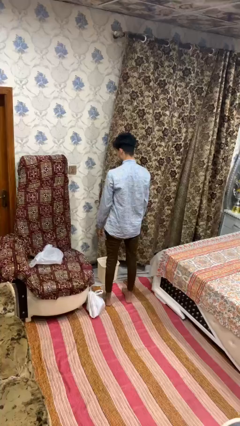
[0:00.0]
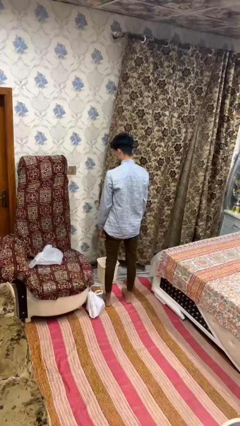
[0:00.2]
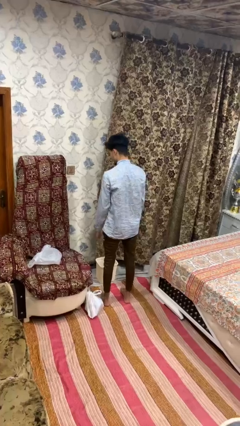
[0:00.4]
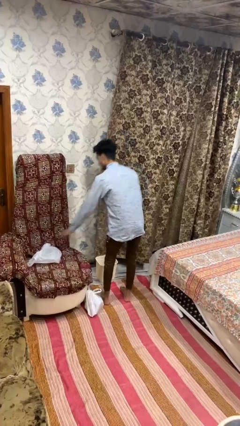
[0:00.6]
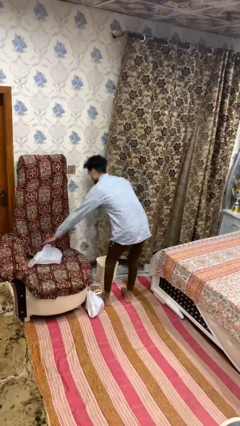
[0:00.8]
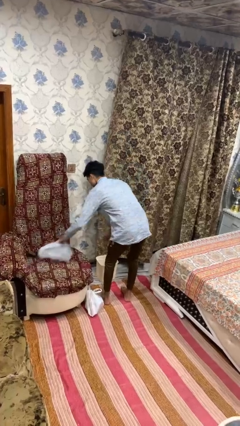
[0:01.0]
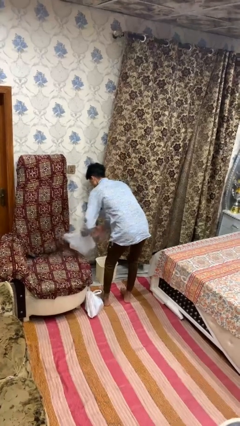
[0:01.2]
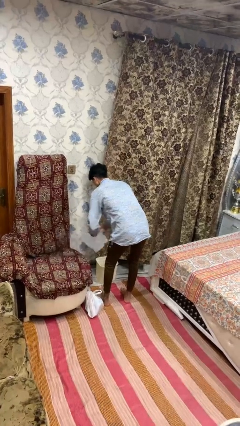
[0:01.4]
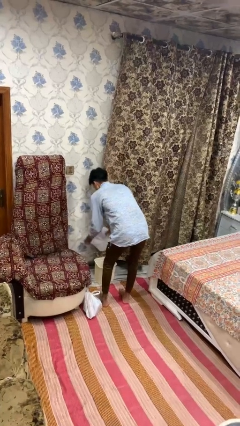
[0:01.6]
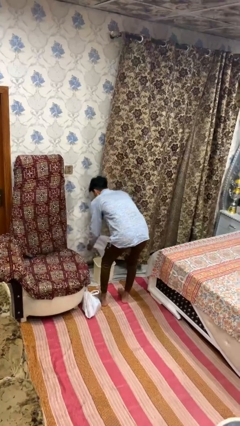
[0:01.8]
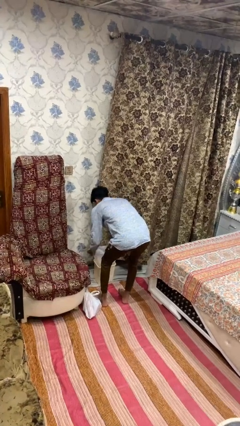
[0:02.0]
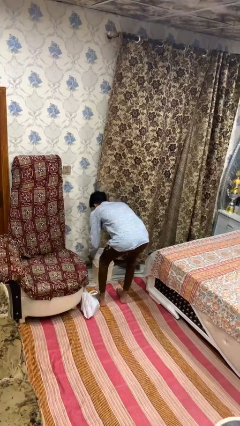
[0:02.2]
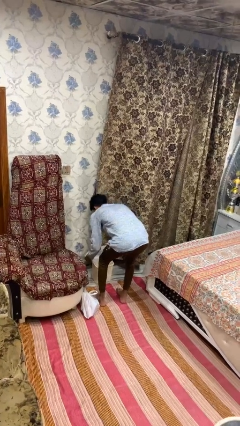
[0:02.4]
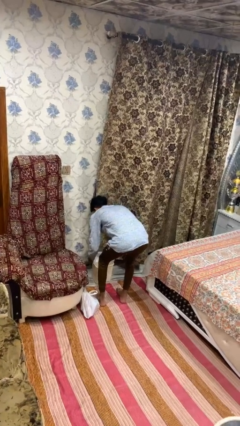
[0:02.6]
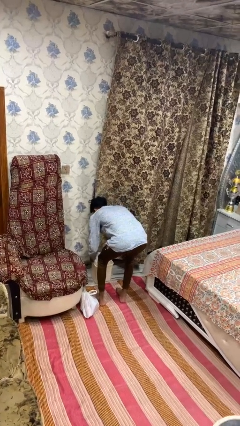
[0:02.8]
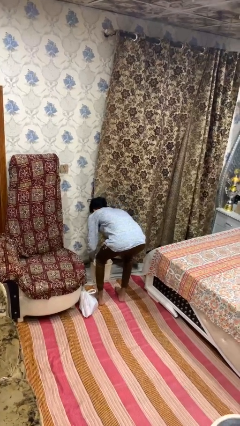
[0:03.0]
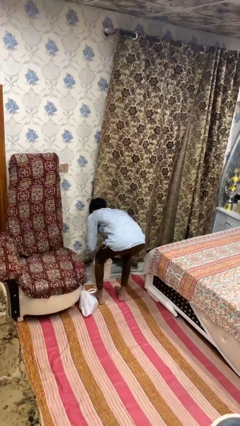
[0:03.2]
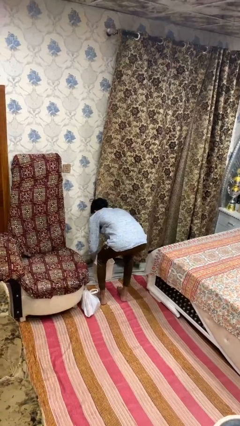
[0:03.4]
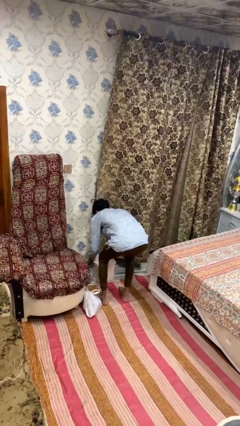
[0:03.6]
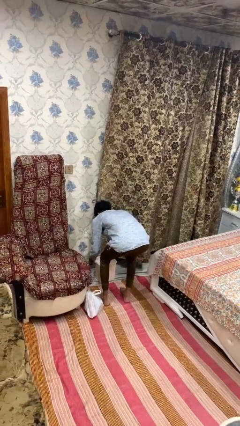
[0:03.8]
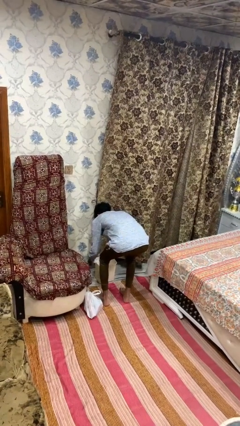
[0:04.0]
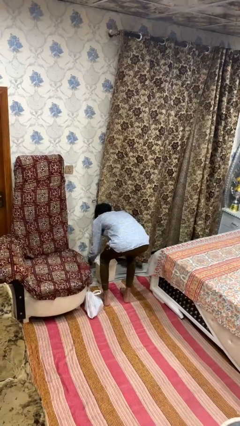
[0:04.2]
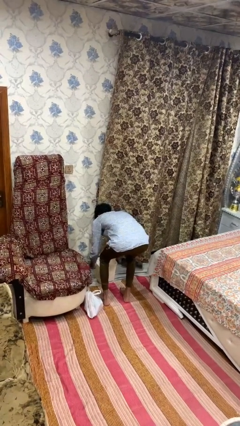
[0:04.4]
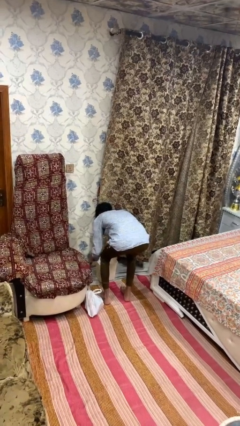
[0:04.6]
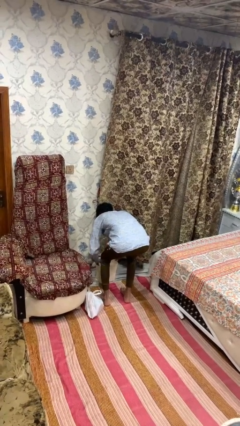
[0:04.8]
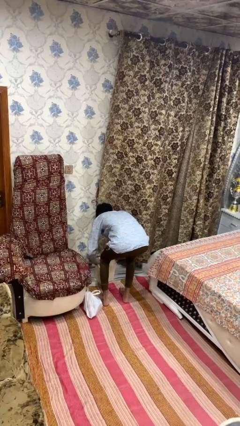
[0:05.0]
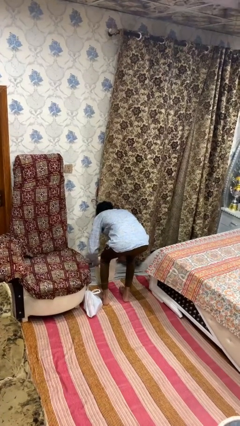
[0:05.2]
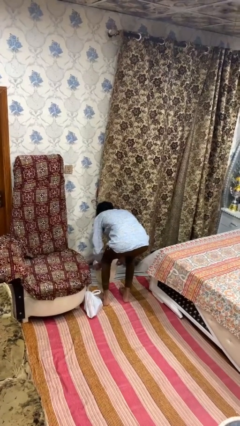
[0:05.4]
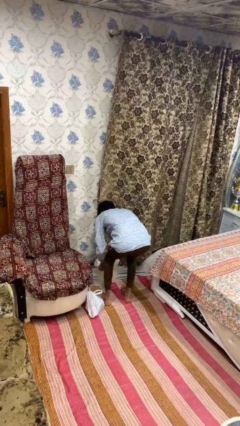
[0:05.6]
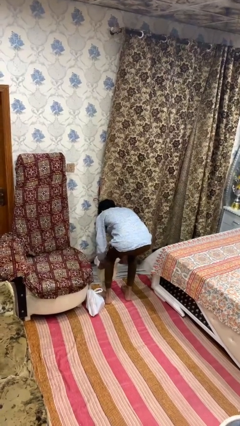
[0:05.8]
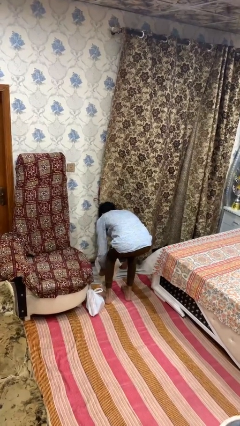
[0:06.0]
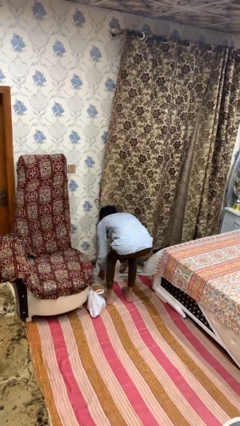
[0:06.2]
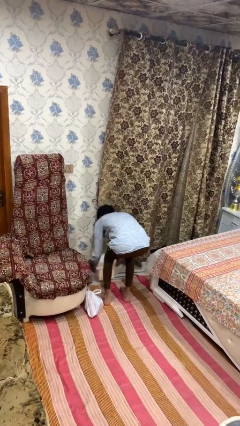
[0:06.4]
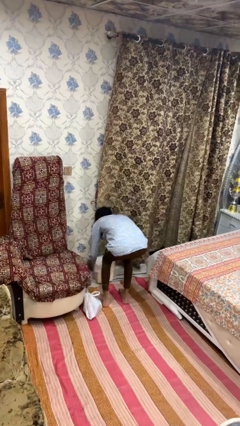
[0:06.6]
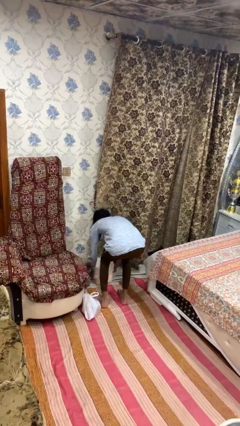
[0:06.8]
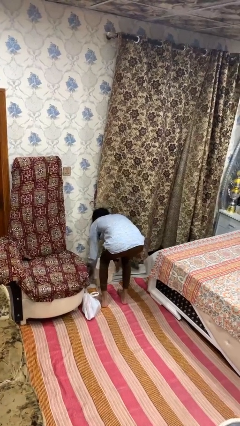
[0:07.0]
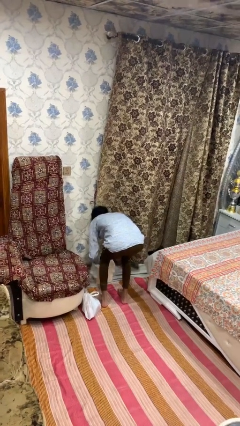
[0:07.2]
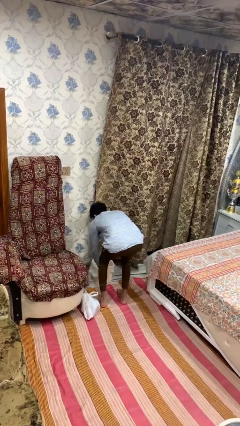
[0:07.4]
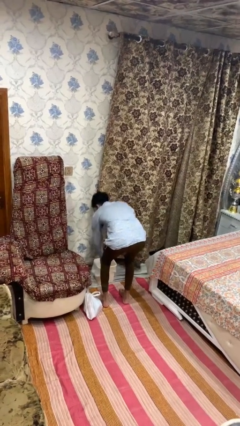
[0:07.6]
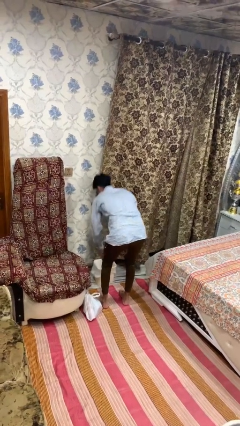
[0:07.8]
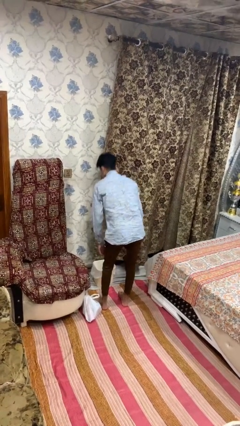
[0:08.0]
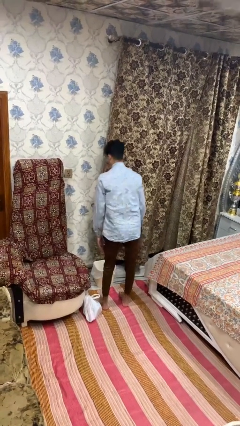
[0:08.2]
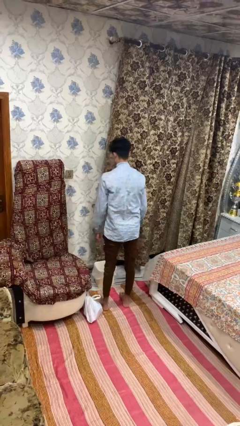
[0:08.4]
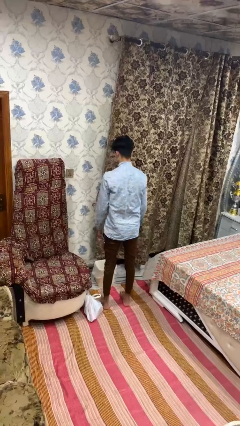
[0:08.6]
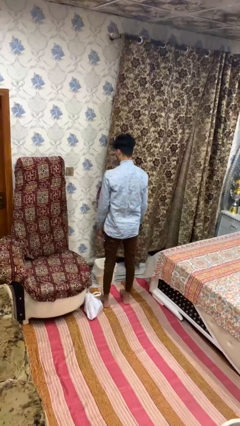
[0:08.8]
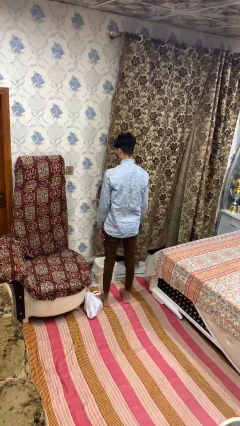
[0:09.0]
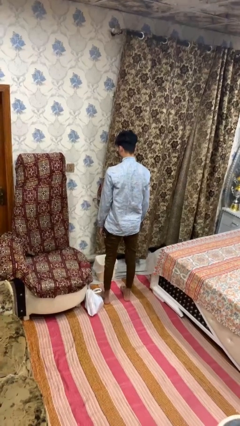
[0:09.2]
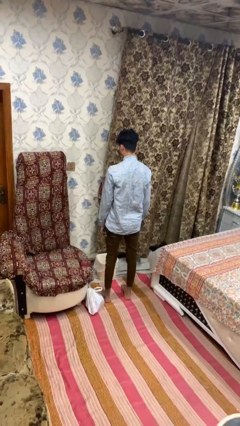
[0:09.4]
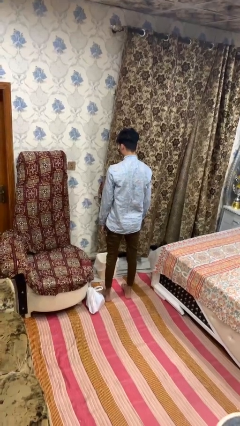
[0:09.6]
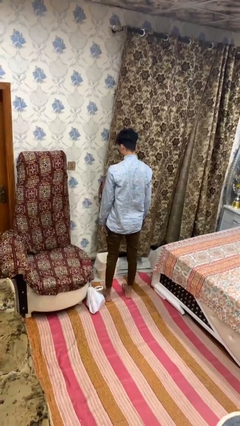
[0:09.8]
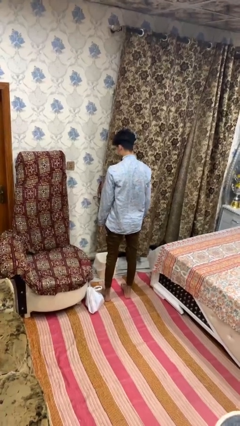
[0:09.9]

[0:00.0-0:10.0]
person inserts trashbag into trashcan

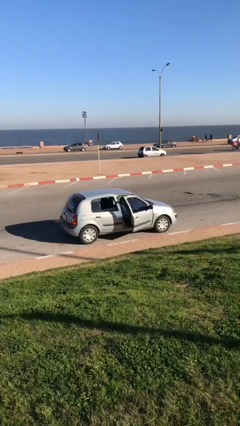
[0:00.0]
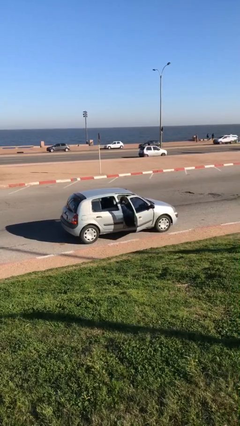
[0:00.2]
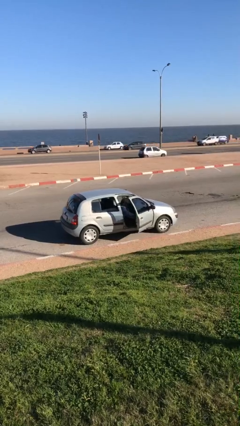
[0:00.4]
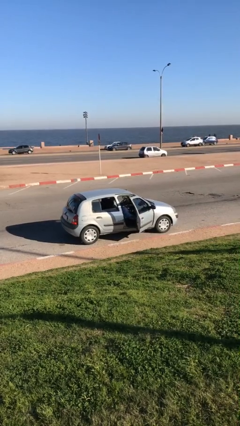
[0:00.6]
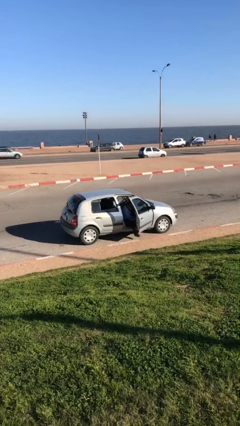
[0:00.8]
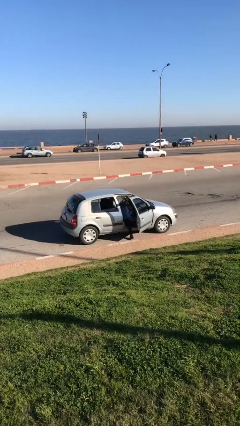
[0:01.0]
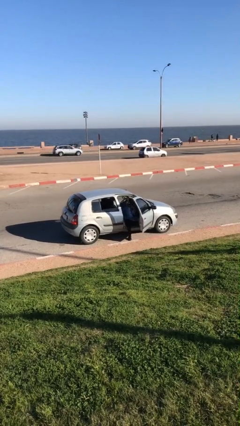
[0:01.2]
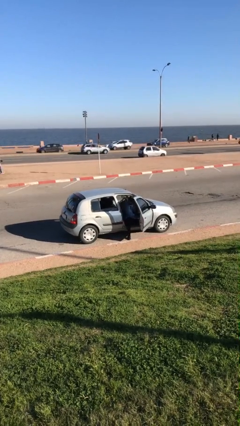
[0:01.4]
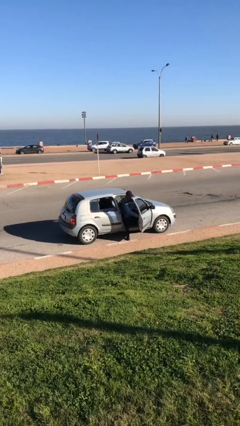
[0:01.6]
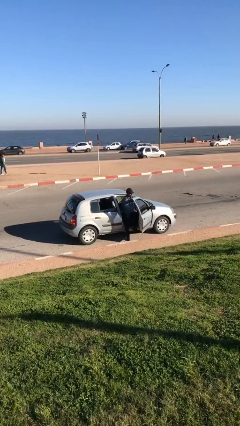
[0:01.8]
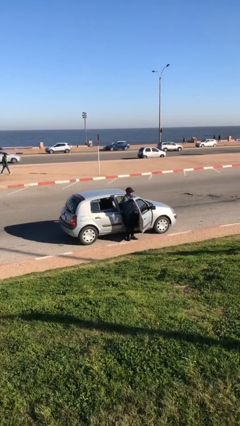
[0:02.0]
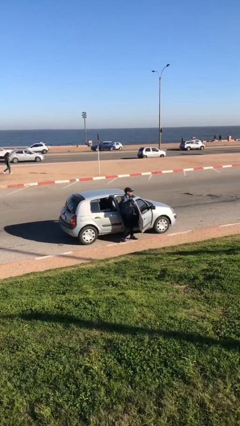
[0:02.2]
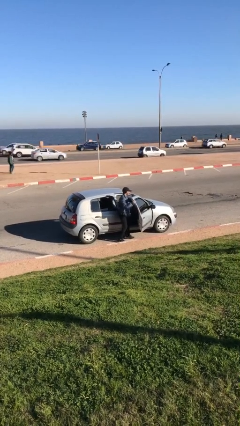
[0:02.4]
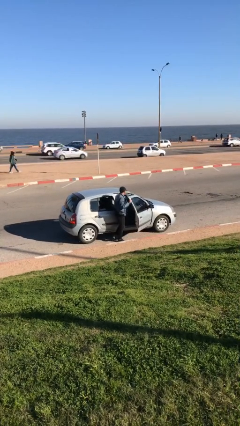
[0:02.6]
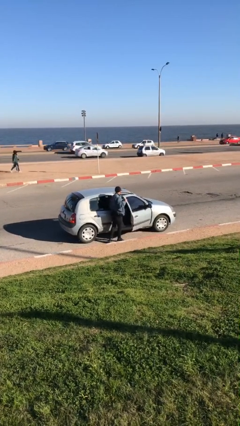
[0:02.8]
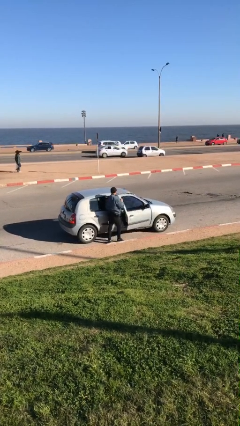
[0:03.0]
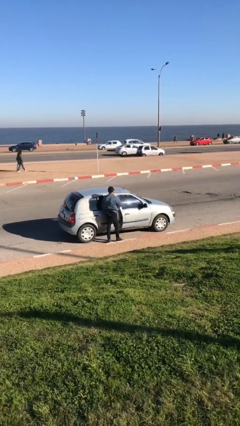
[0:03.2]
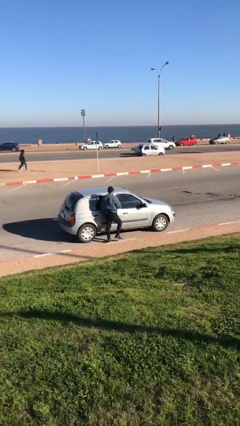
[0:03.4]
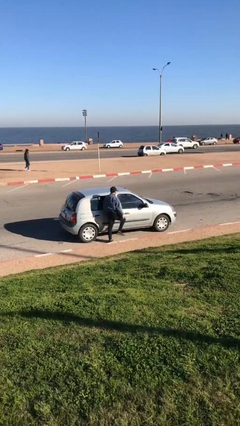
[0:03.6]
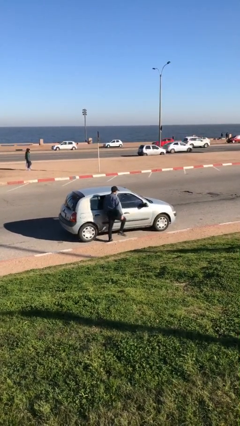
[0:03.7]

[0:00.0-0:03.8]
car drops off person

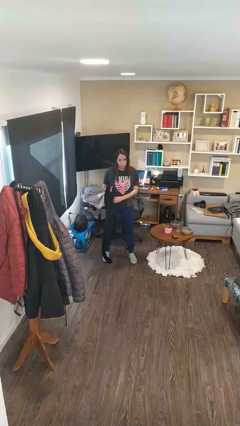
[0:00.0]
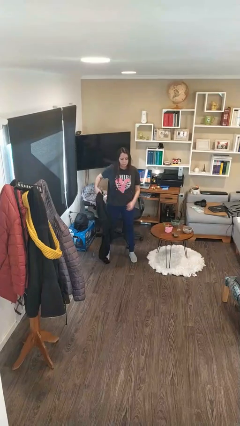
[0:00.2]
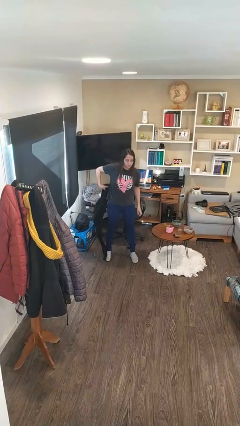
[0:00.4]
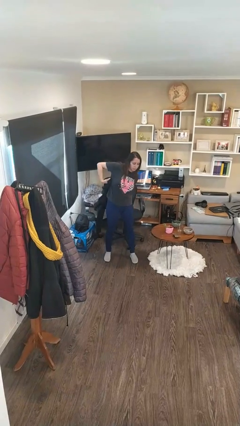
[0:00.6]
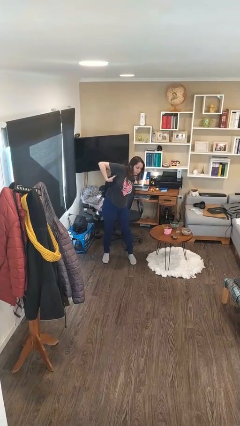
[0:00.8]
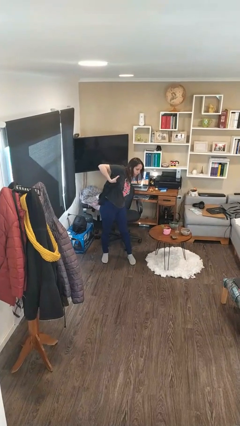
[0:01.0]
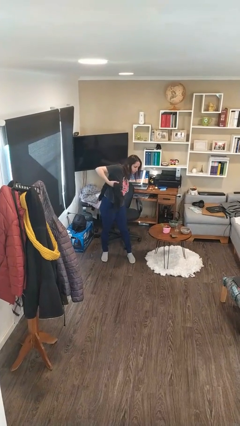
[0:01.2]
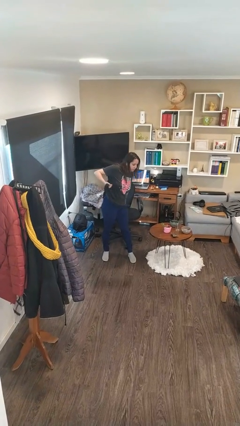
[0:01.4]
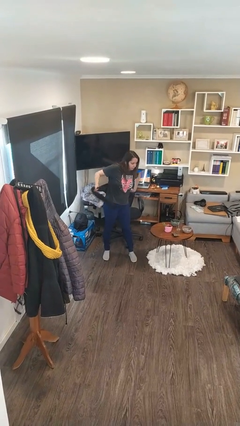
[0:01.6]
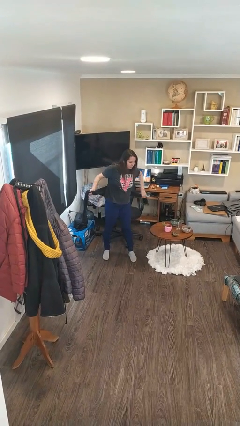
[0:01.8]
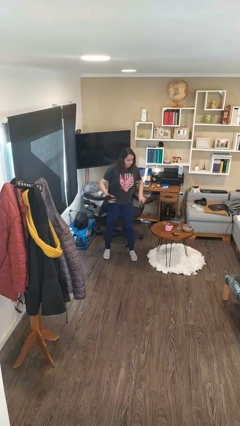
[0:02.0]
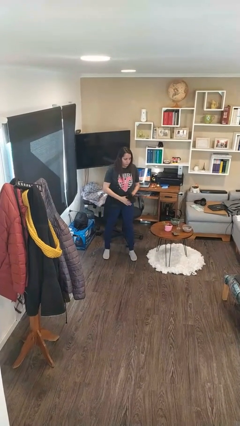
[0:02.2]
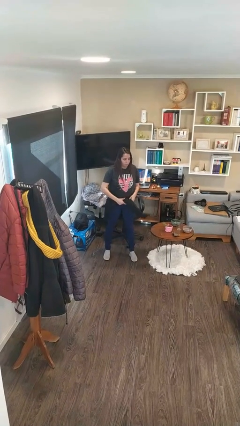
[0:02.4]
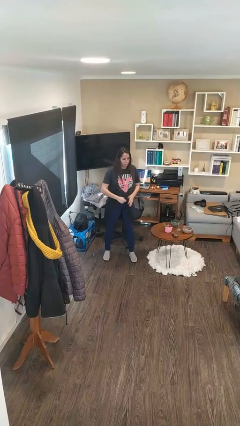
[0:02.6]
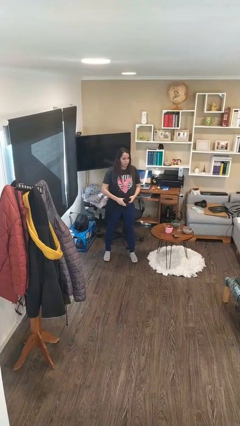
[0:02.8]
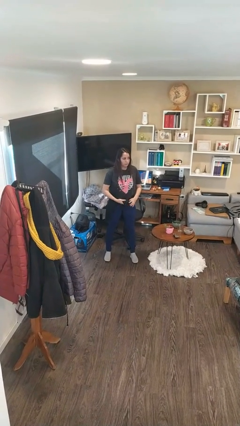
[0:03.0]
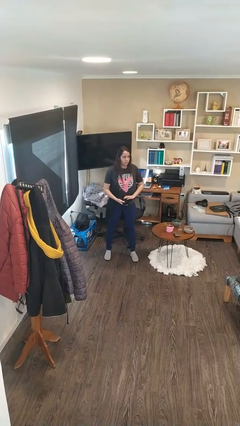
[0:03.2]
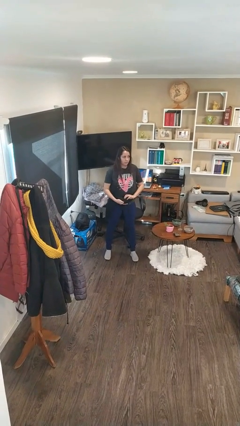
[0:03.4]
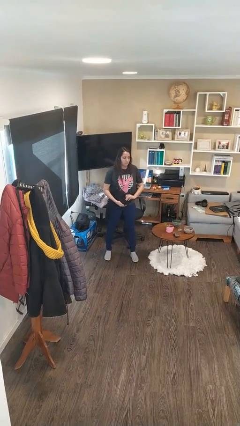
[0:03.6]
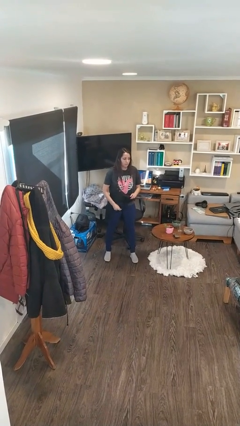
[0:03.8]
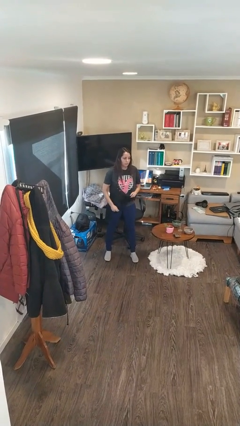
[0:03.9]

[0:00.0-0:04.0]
person ties jacket around waist

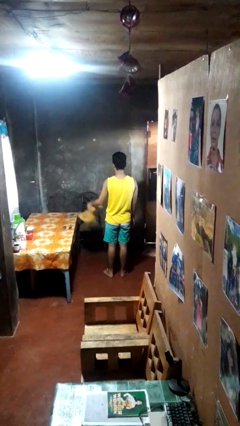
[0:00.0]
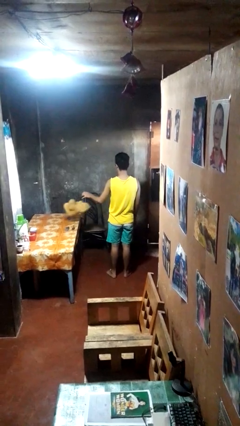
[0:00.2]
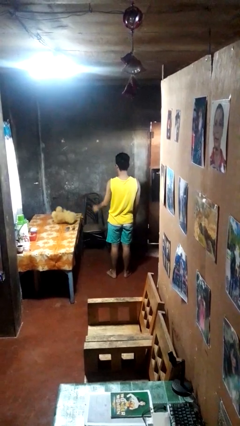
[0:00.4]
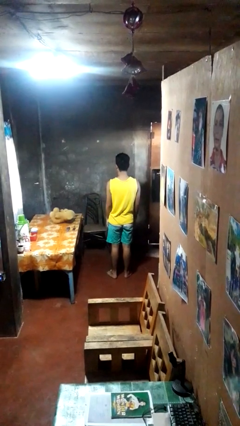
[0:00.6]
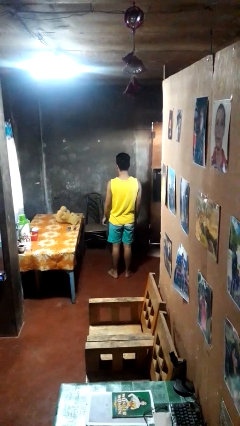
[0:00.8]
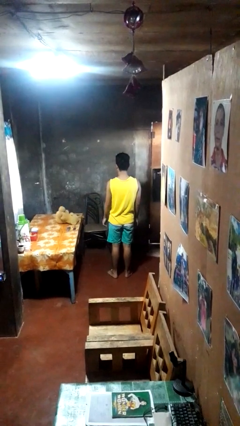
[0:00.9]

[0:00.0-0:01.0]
person throws object on table
